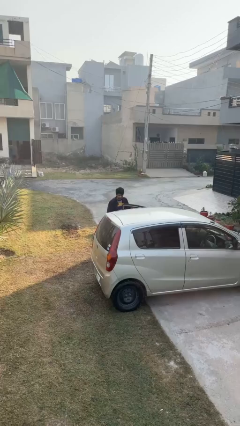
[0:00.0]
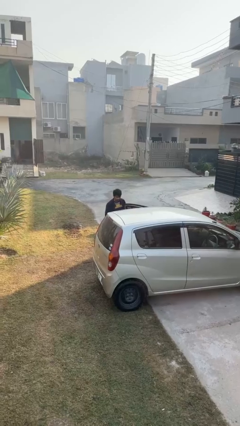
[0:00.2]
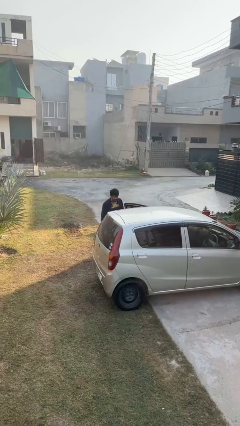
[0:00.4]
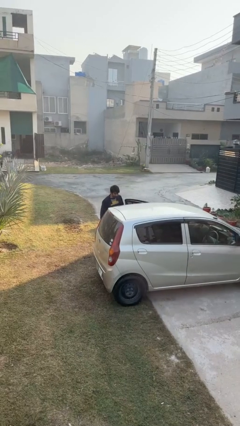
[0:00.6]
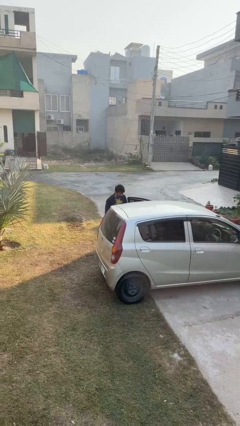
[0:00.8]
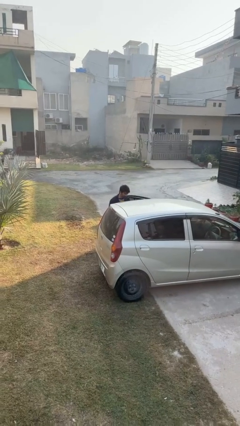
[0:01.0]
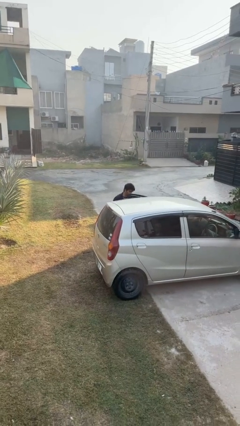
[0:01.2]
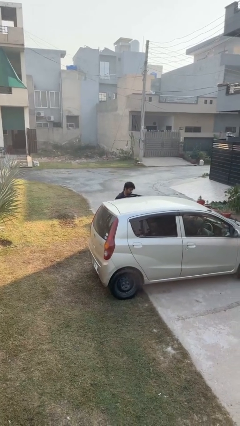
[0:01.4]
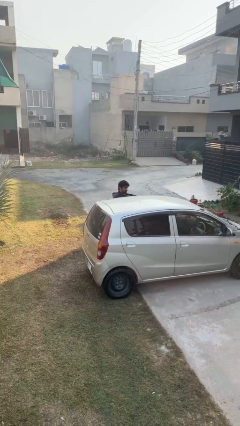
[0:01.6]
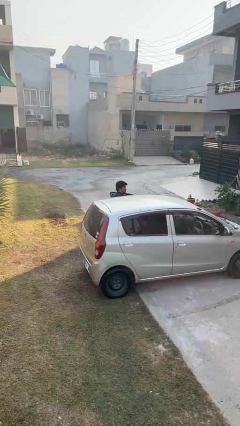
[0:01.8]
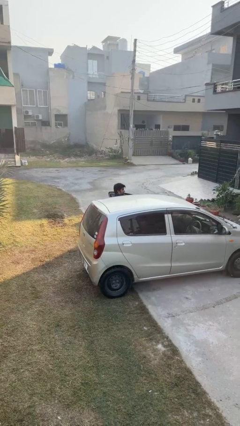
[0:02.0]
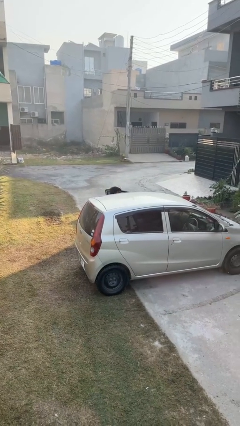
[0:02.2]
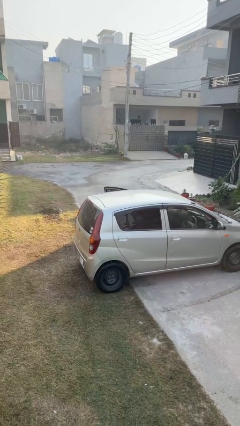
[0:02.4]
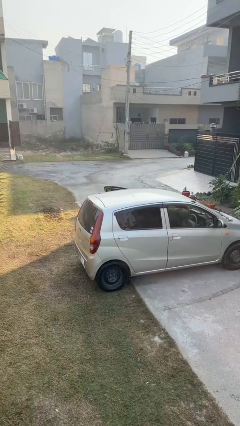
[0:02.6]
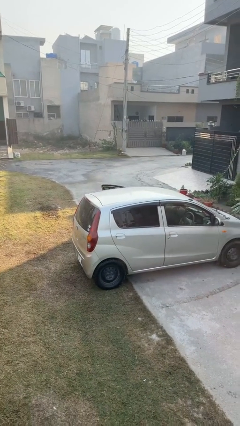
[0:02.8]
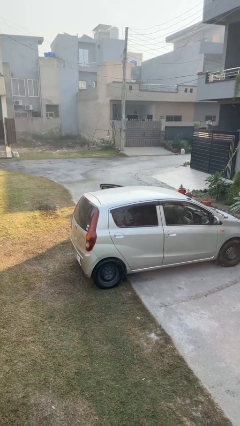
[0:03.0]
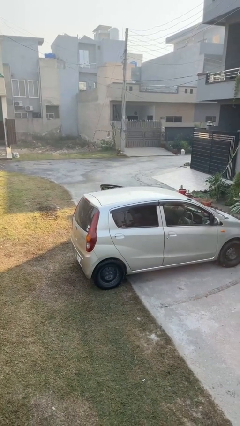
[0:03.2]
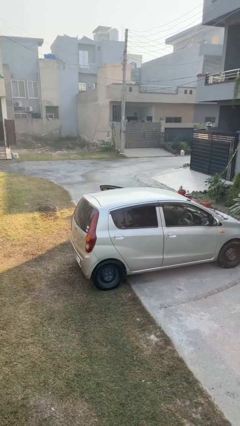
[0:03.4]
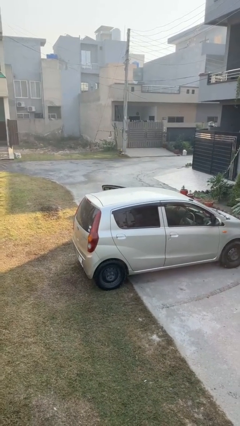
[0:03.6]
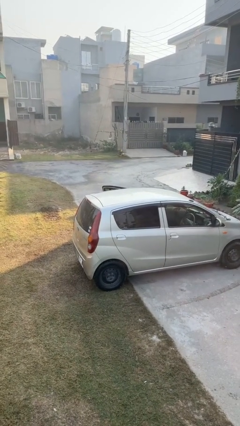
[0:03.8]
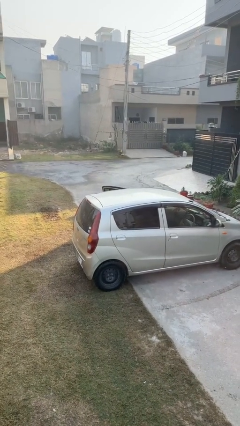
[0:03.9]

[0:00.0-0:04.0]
person enters car

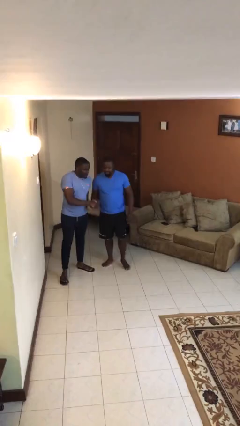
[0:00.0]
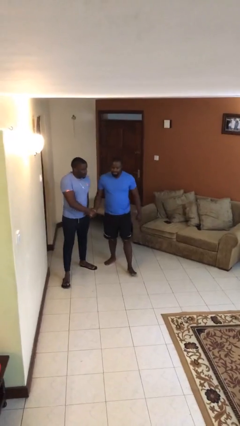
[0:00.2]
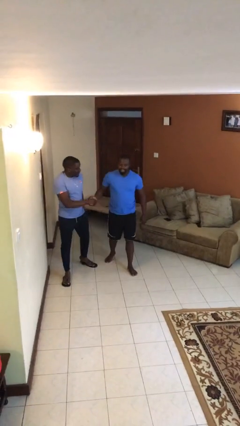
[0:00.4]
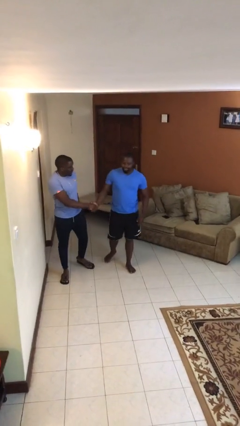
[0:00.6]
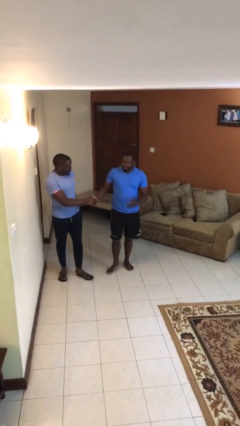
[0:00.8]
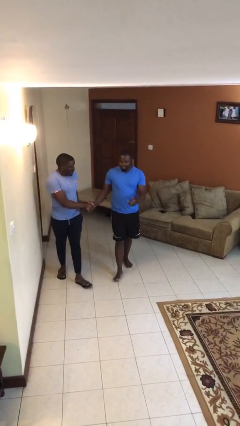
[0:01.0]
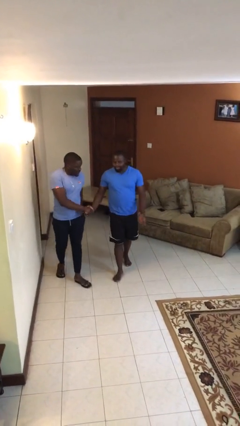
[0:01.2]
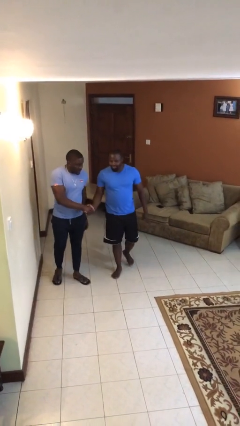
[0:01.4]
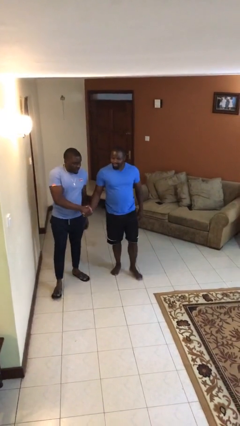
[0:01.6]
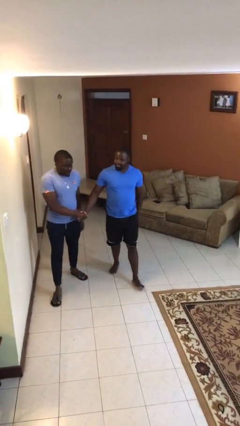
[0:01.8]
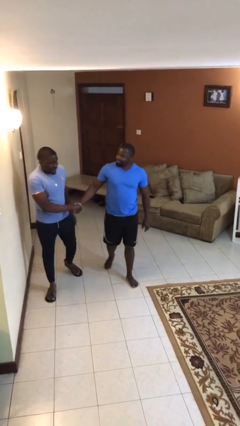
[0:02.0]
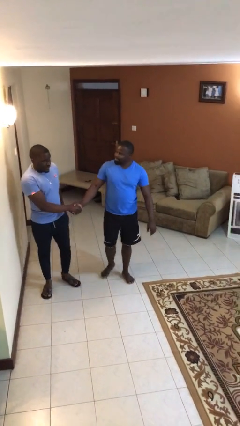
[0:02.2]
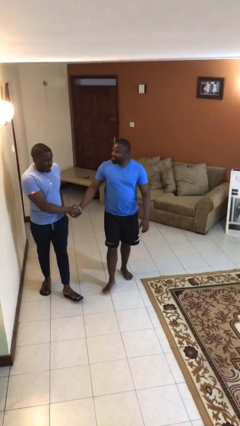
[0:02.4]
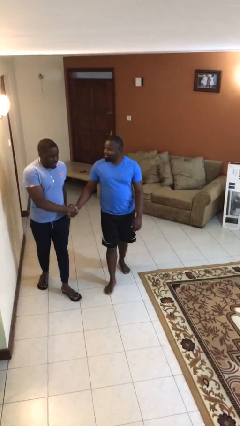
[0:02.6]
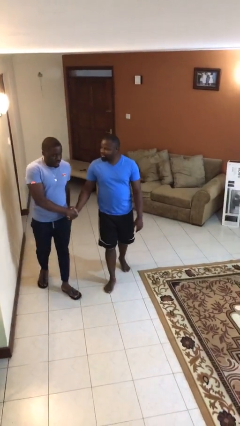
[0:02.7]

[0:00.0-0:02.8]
person holds hand

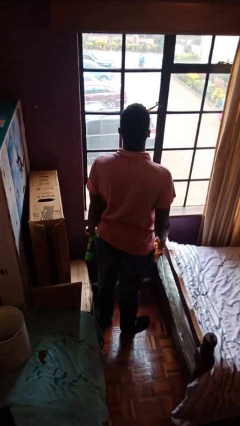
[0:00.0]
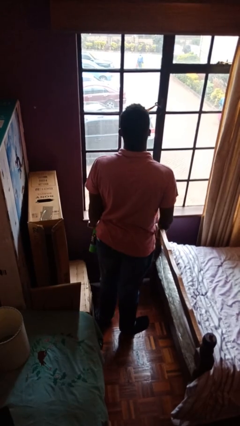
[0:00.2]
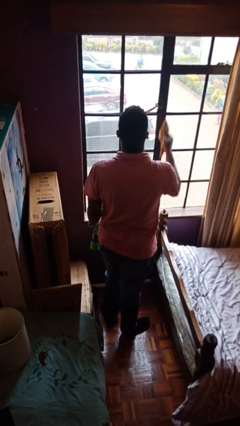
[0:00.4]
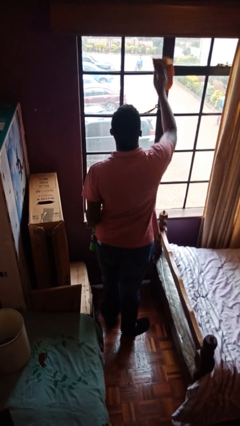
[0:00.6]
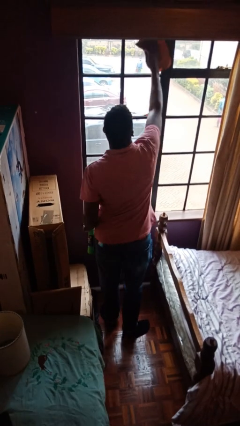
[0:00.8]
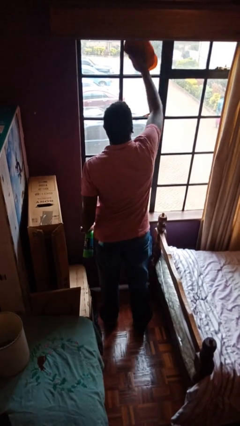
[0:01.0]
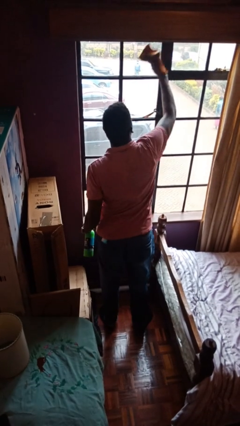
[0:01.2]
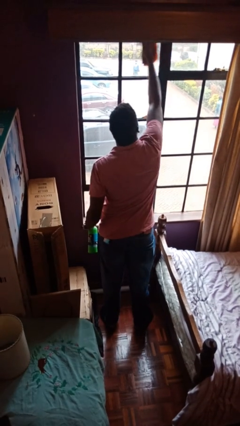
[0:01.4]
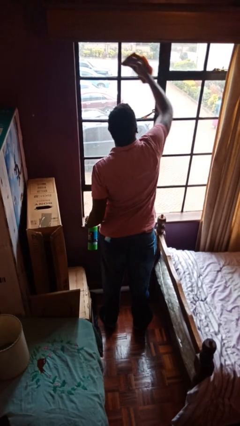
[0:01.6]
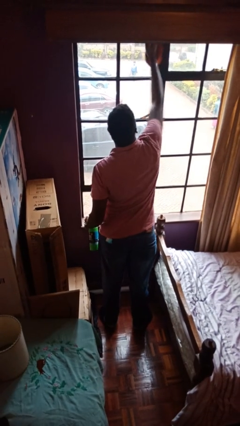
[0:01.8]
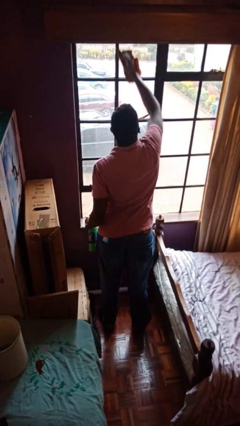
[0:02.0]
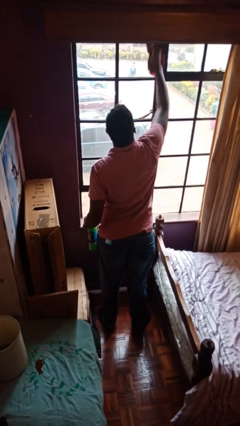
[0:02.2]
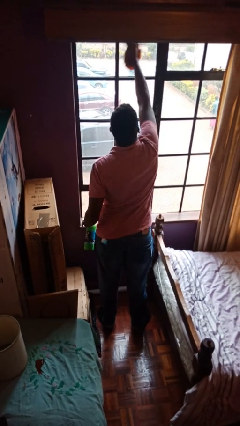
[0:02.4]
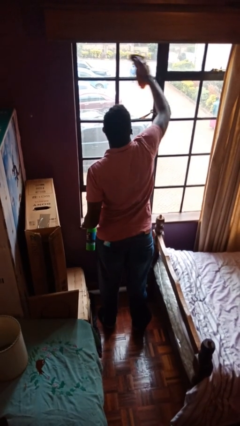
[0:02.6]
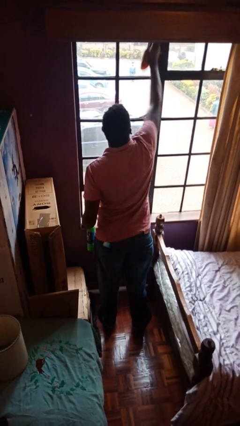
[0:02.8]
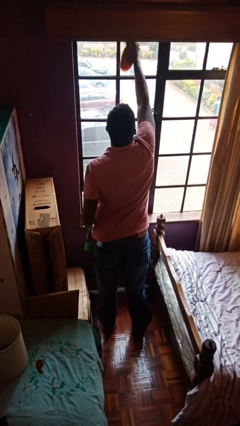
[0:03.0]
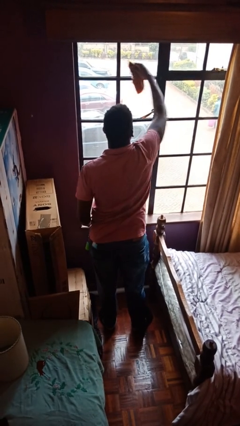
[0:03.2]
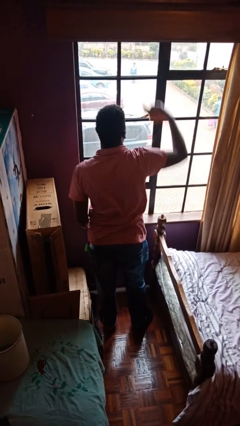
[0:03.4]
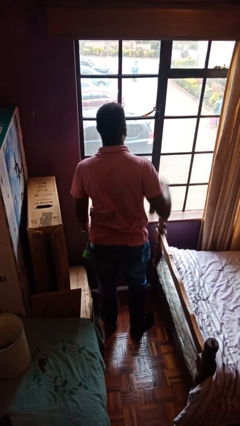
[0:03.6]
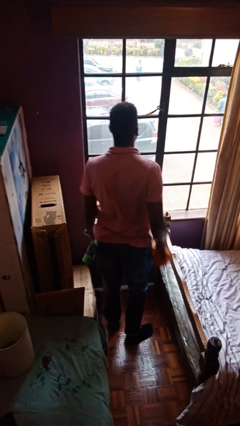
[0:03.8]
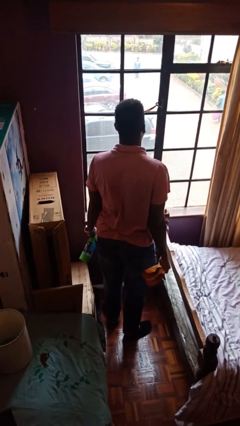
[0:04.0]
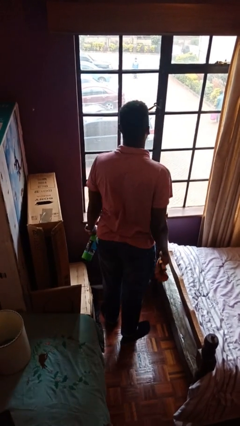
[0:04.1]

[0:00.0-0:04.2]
person washes window

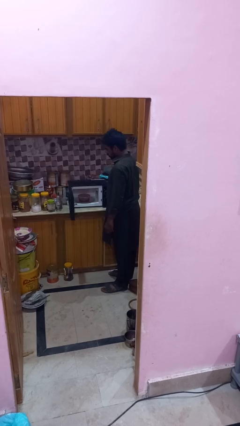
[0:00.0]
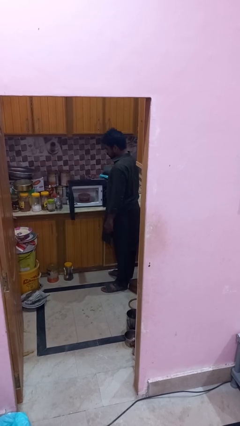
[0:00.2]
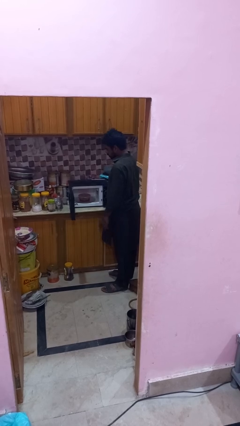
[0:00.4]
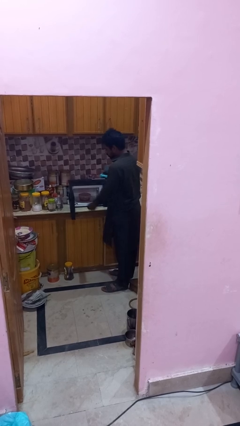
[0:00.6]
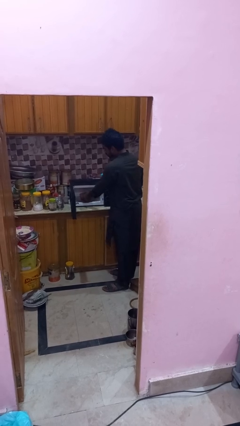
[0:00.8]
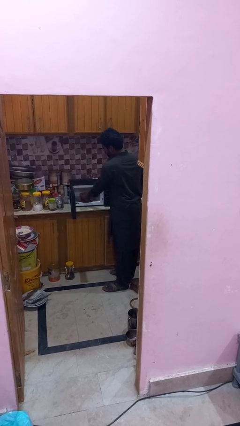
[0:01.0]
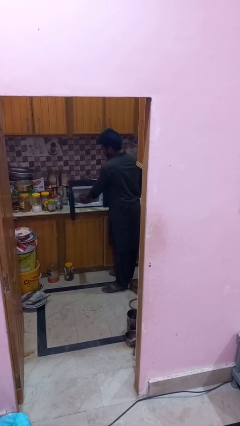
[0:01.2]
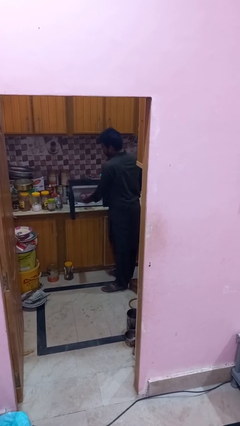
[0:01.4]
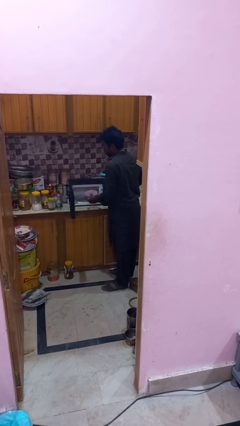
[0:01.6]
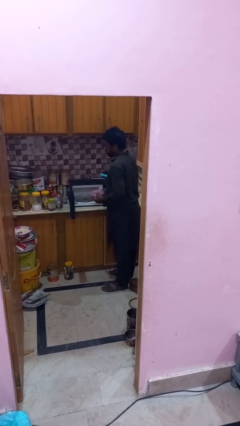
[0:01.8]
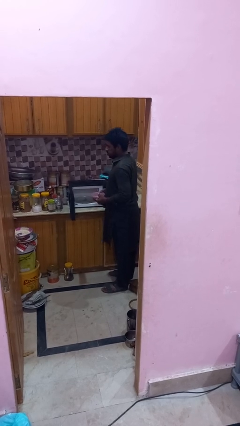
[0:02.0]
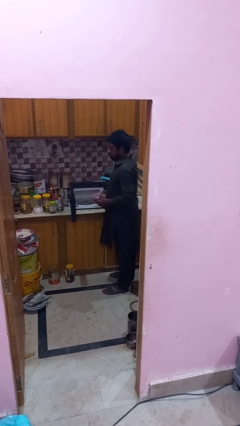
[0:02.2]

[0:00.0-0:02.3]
person takes object from microwave

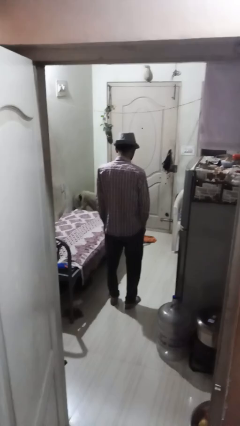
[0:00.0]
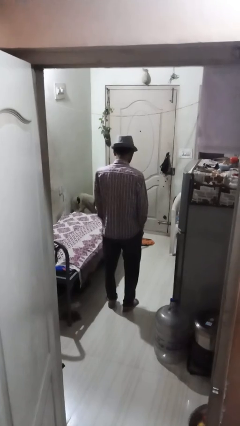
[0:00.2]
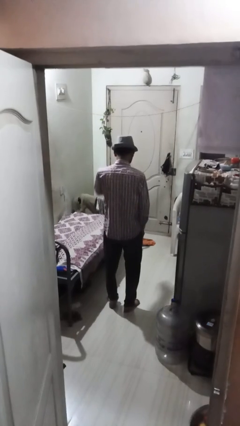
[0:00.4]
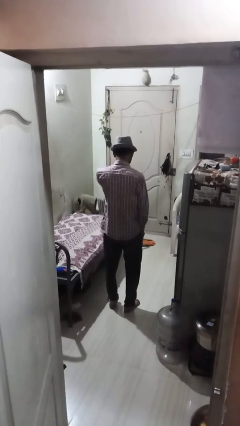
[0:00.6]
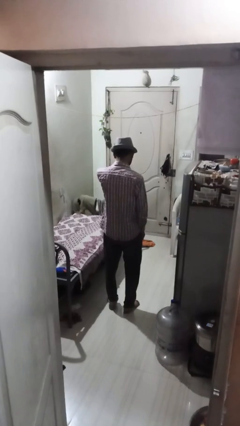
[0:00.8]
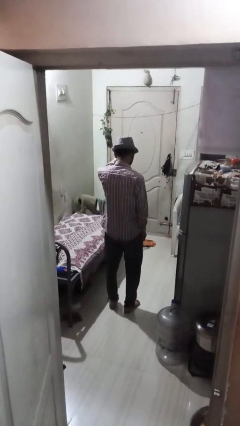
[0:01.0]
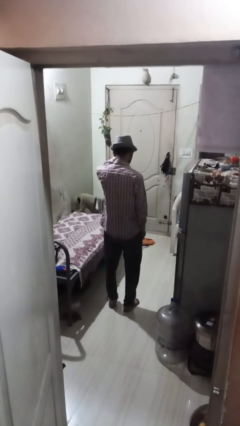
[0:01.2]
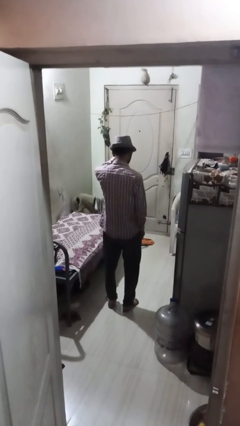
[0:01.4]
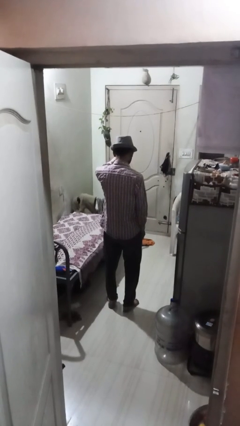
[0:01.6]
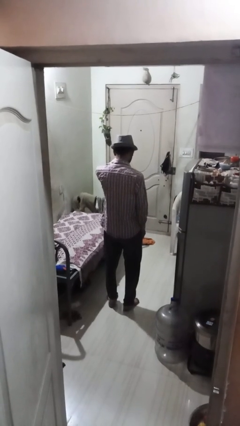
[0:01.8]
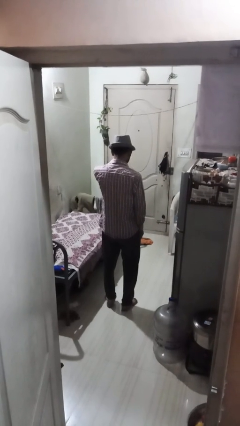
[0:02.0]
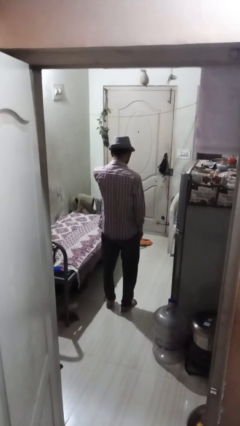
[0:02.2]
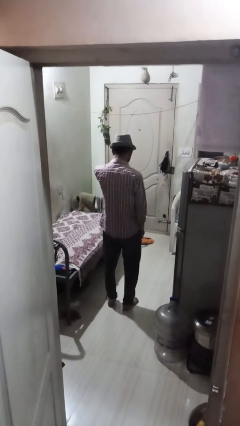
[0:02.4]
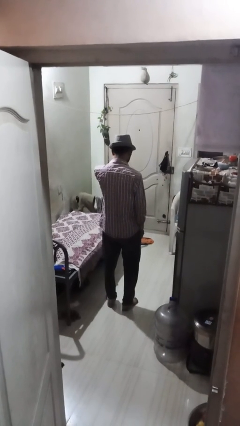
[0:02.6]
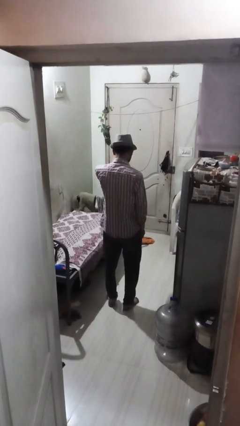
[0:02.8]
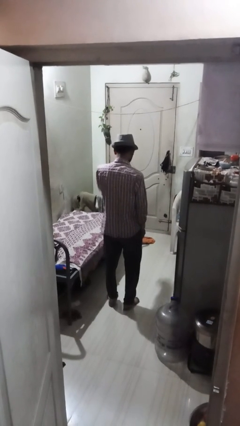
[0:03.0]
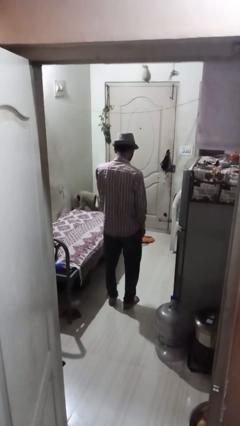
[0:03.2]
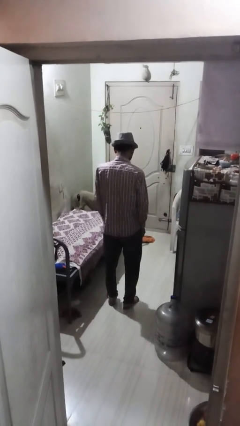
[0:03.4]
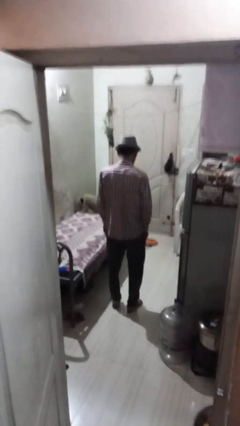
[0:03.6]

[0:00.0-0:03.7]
person waves at person

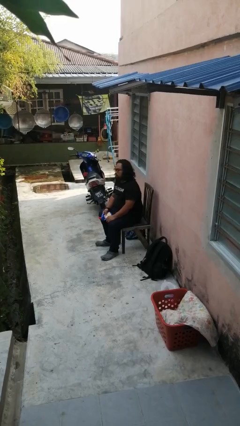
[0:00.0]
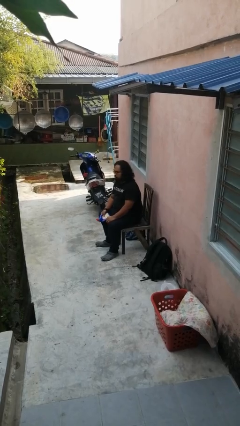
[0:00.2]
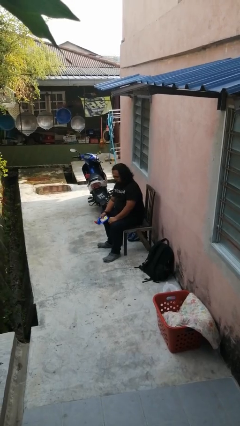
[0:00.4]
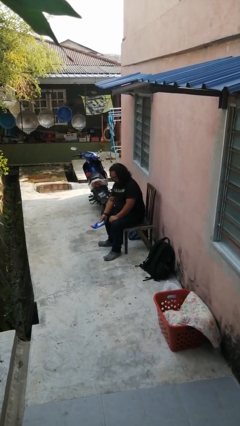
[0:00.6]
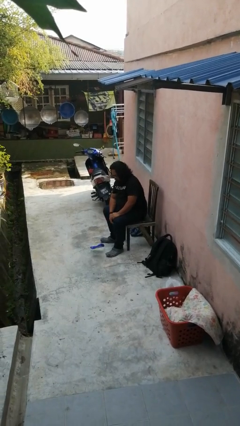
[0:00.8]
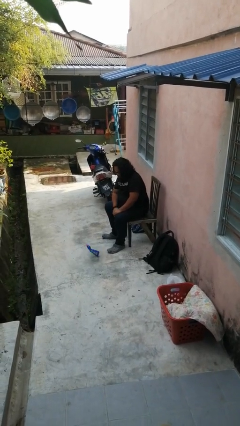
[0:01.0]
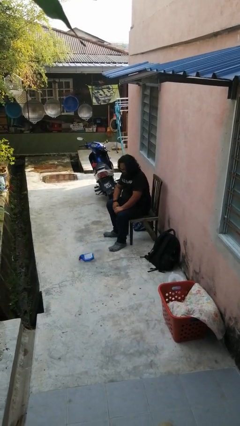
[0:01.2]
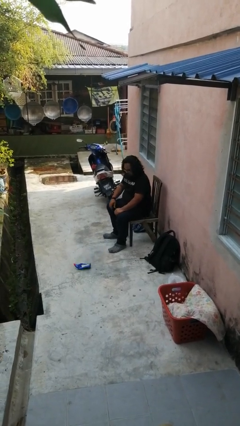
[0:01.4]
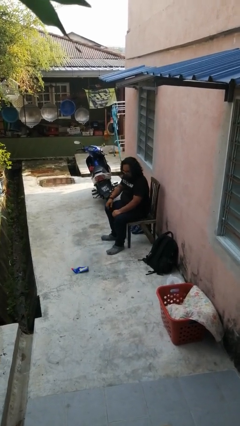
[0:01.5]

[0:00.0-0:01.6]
person drops object
